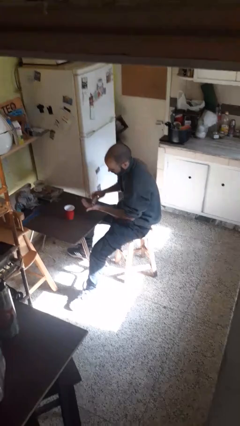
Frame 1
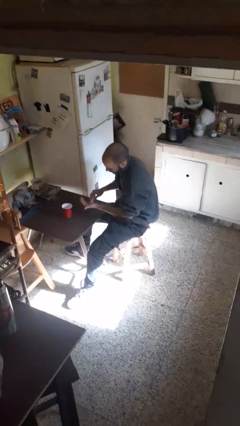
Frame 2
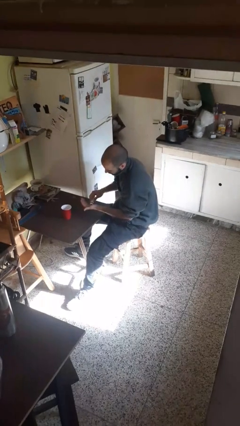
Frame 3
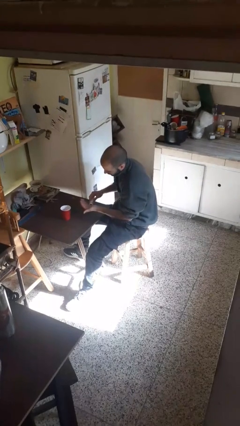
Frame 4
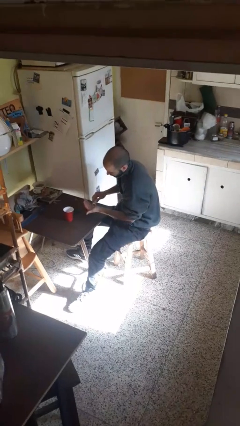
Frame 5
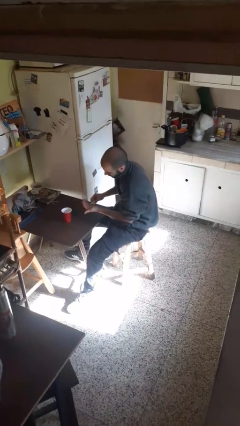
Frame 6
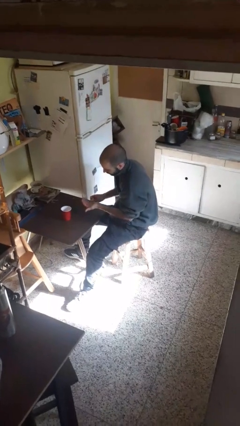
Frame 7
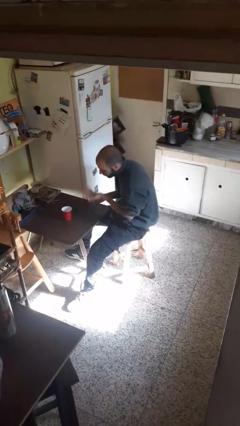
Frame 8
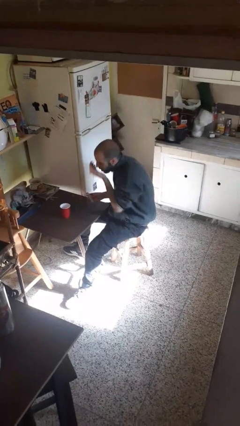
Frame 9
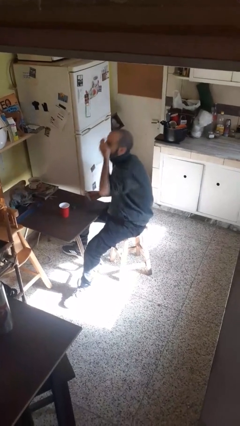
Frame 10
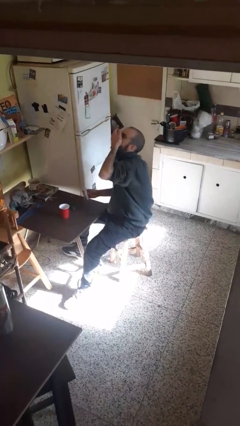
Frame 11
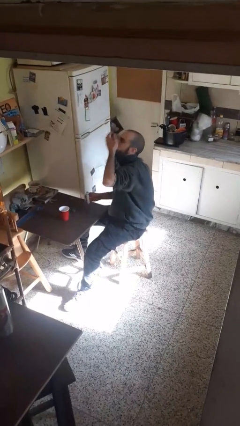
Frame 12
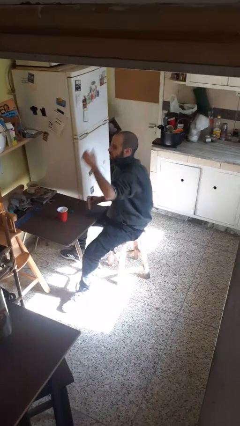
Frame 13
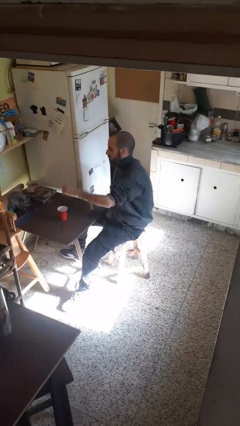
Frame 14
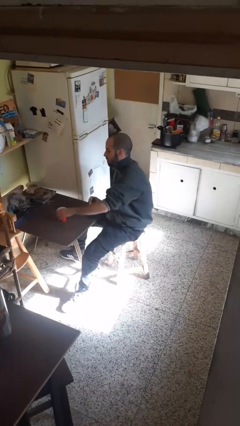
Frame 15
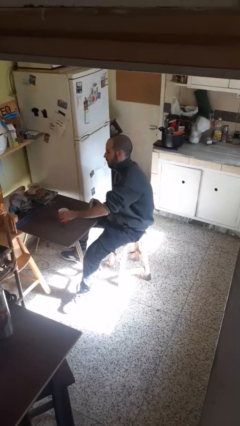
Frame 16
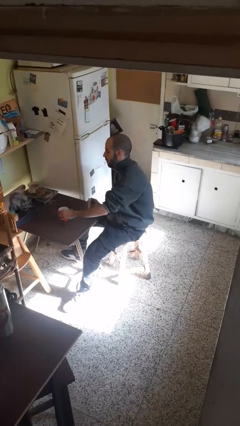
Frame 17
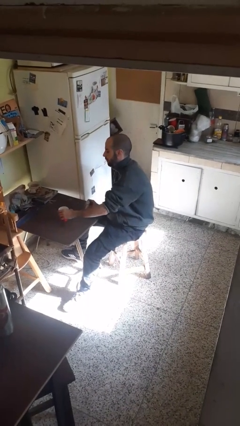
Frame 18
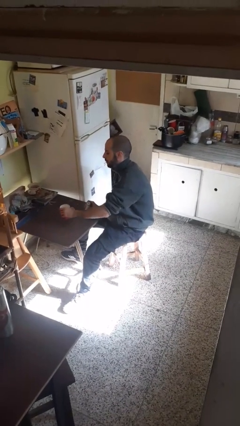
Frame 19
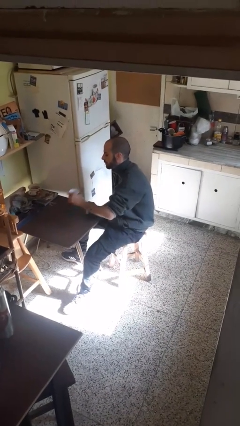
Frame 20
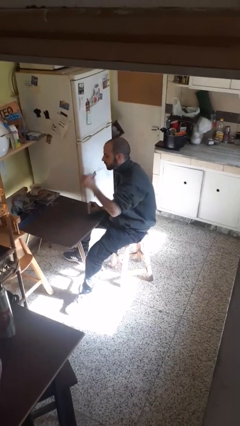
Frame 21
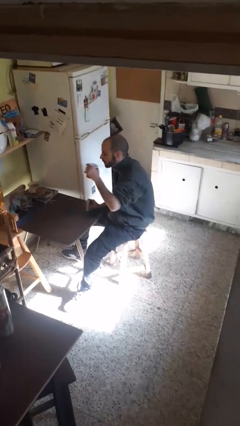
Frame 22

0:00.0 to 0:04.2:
person takes medicine pills

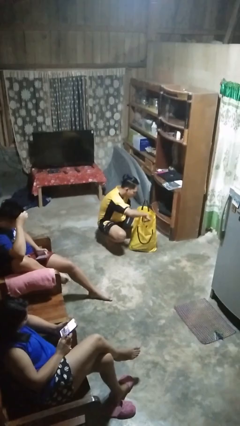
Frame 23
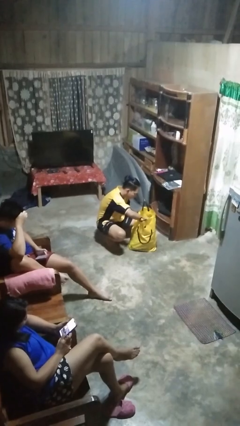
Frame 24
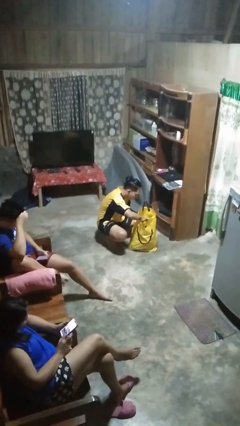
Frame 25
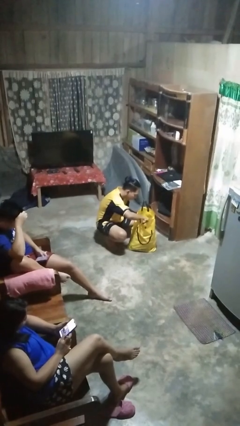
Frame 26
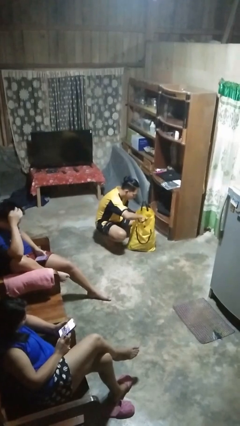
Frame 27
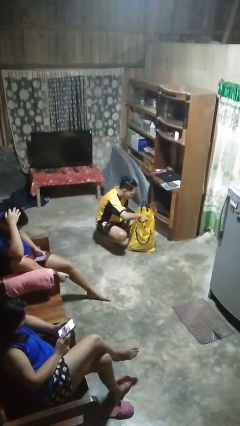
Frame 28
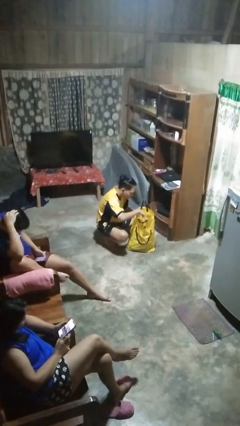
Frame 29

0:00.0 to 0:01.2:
person searches in bag

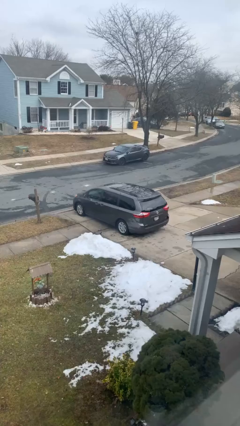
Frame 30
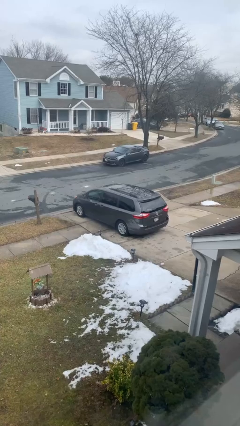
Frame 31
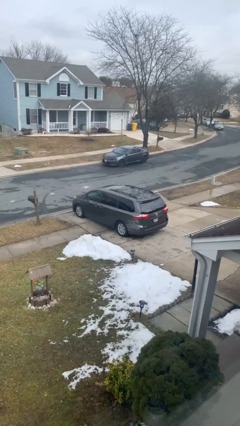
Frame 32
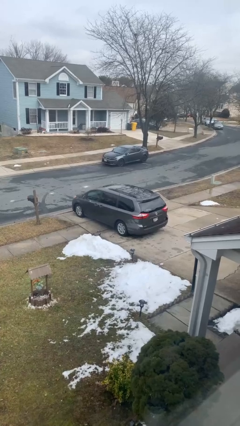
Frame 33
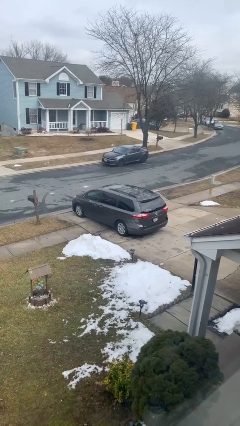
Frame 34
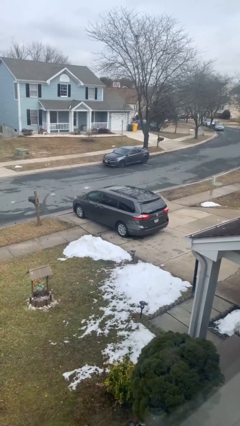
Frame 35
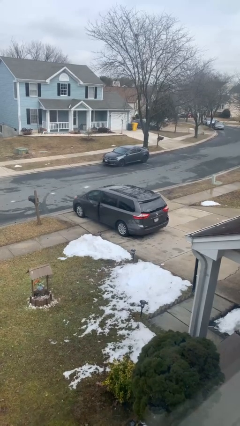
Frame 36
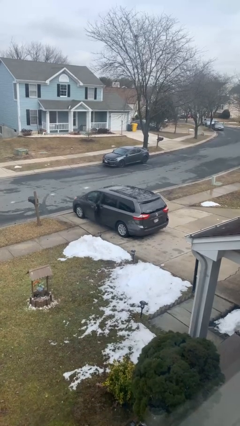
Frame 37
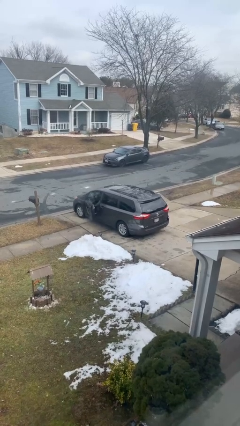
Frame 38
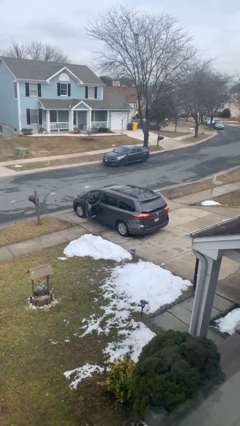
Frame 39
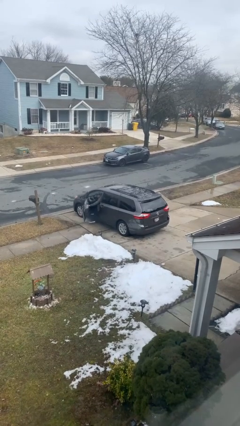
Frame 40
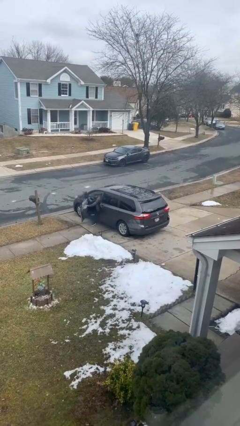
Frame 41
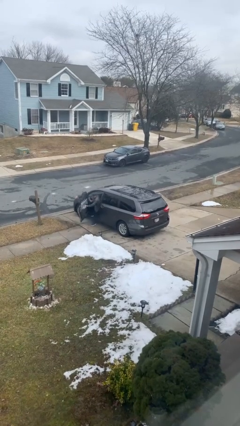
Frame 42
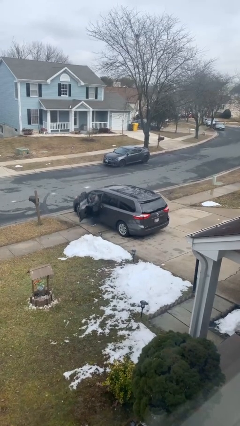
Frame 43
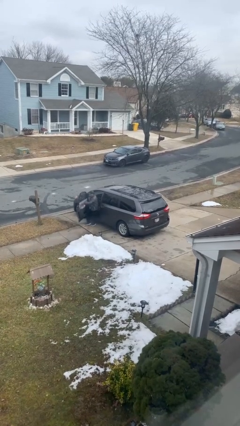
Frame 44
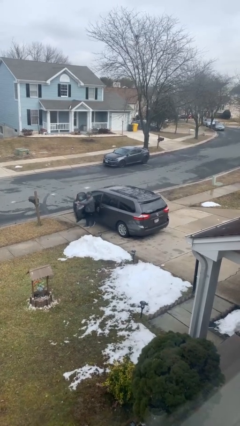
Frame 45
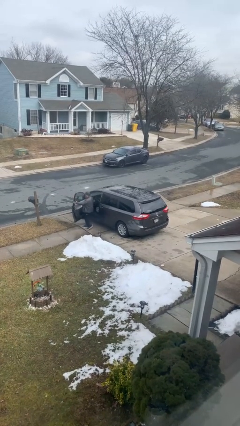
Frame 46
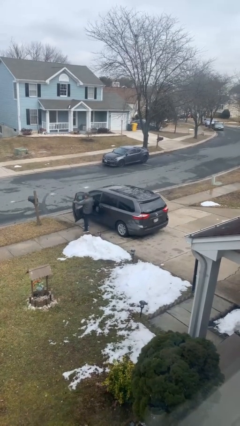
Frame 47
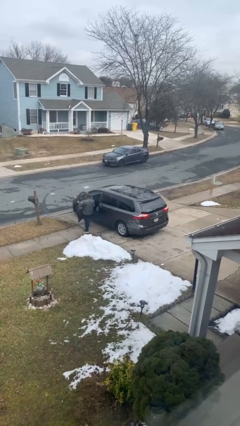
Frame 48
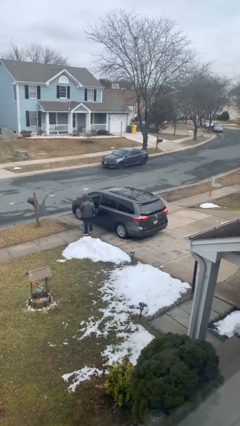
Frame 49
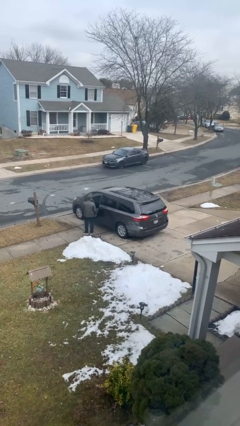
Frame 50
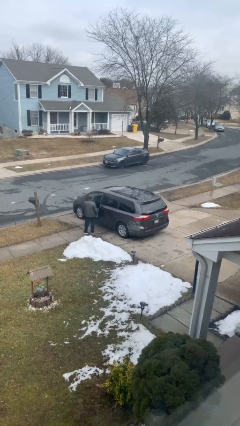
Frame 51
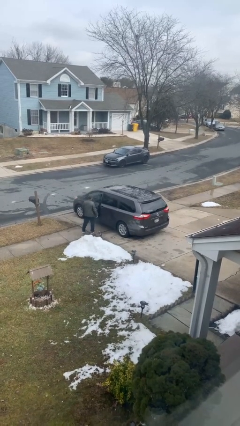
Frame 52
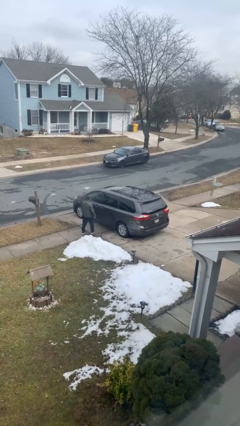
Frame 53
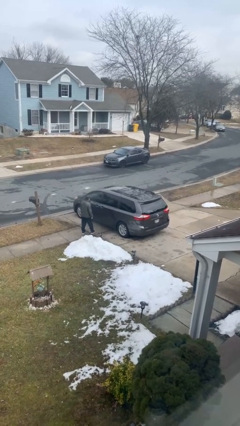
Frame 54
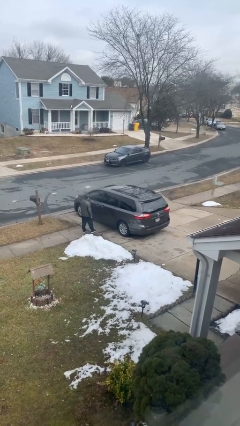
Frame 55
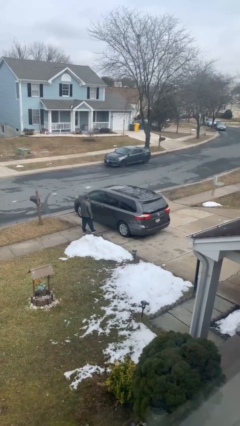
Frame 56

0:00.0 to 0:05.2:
car drops off person

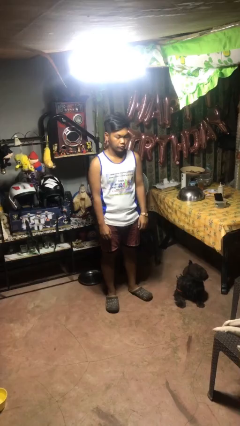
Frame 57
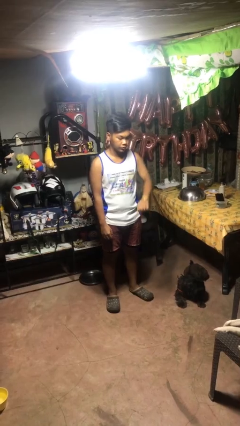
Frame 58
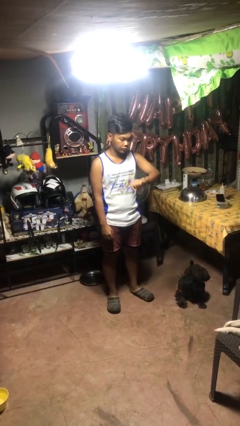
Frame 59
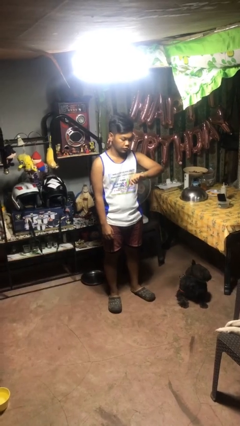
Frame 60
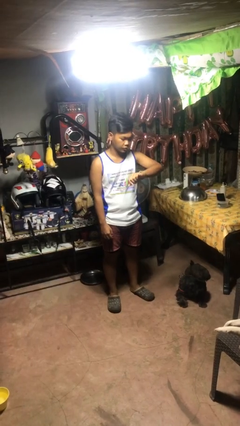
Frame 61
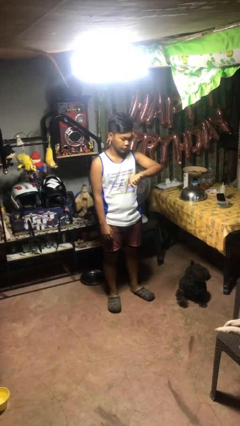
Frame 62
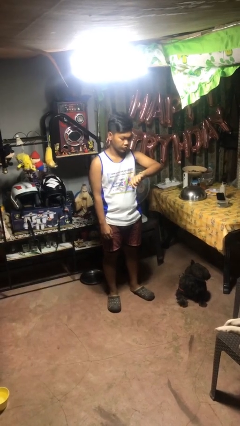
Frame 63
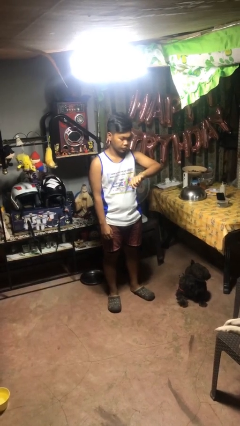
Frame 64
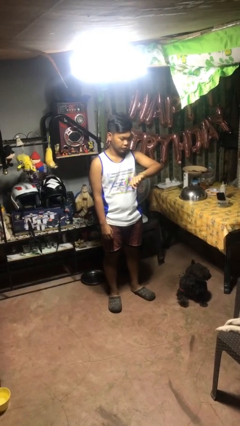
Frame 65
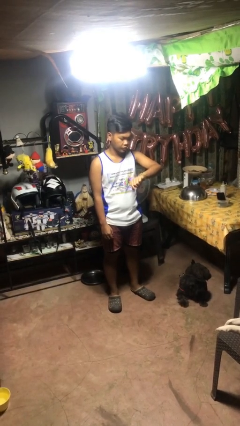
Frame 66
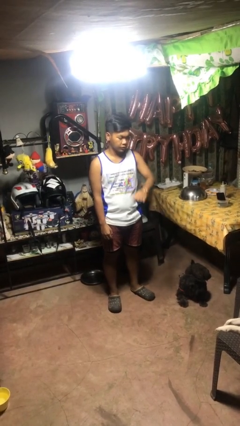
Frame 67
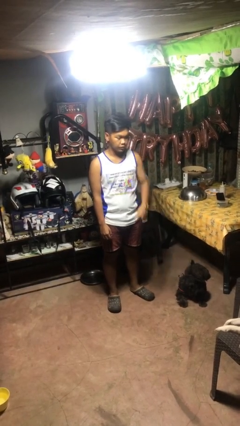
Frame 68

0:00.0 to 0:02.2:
person looks at wristwatch

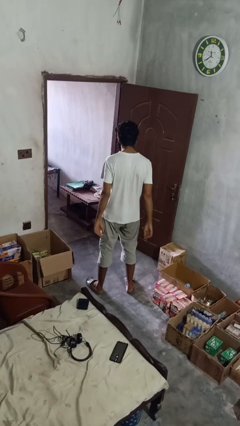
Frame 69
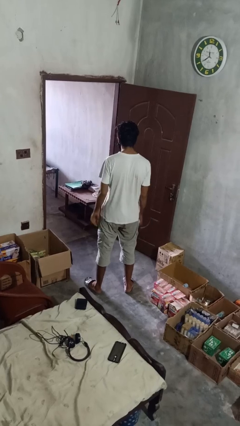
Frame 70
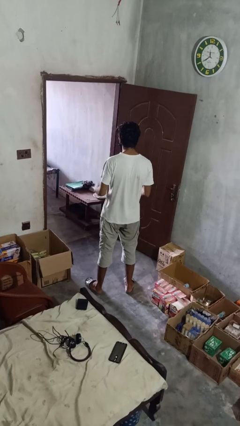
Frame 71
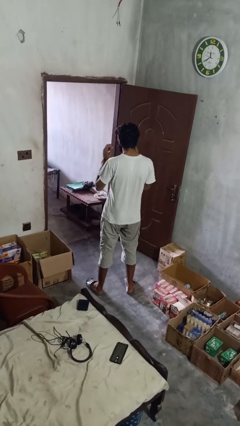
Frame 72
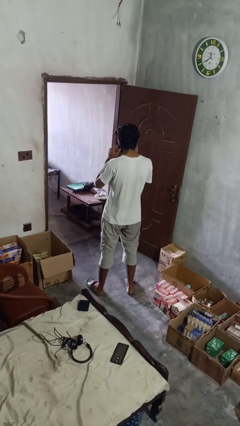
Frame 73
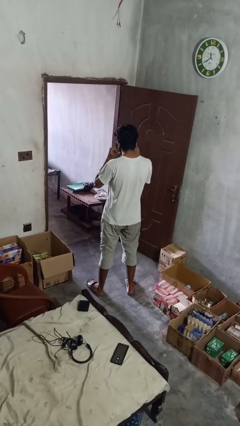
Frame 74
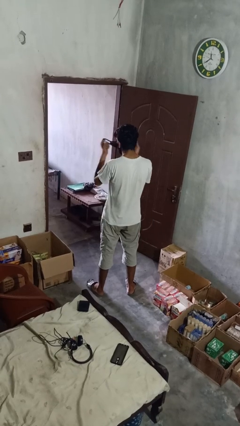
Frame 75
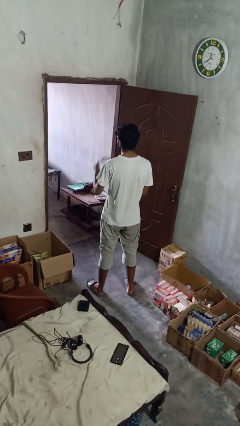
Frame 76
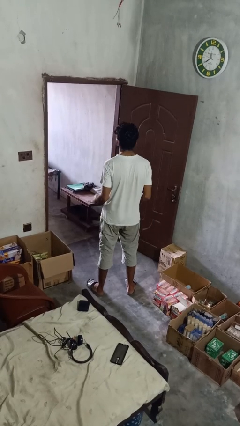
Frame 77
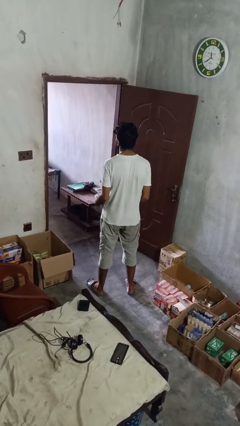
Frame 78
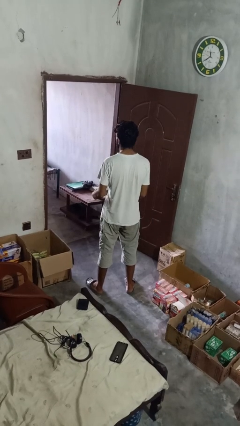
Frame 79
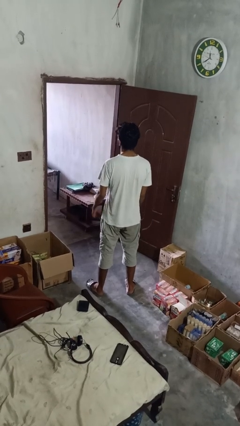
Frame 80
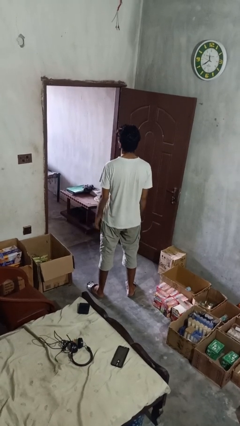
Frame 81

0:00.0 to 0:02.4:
person takes off facemask

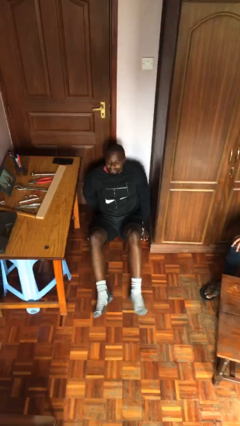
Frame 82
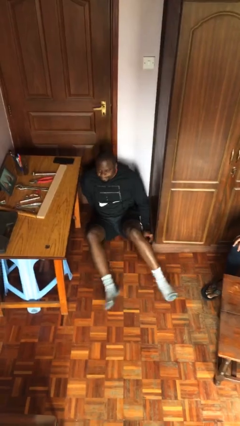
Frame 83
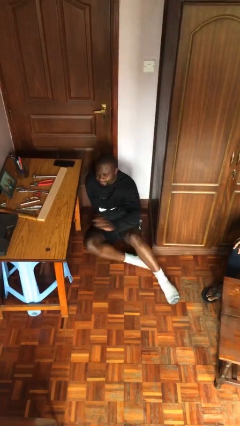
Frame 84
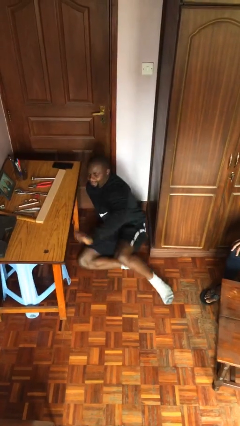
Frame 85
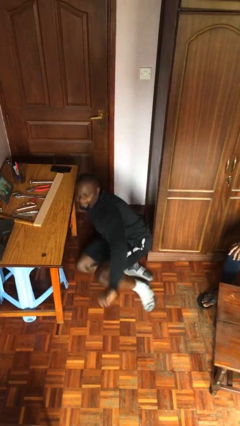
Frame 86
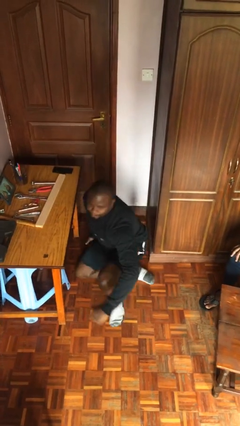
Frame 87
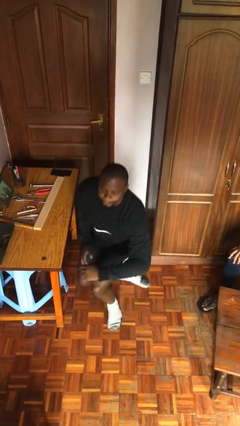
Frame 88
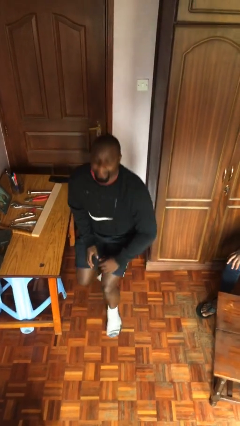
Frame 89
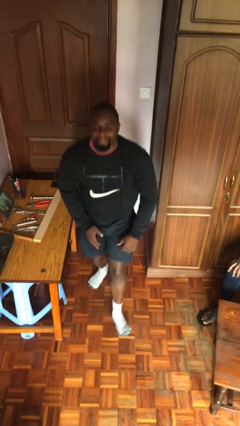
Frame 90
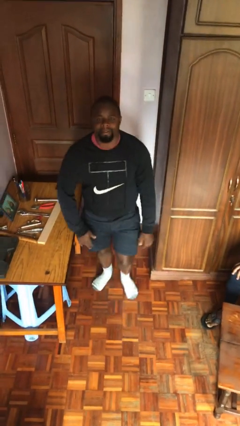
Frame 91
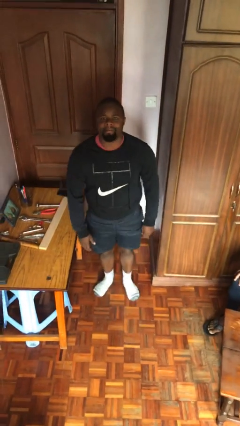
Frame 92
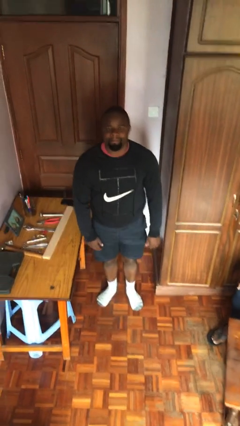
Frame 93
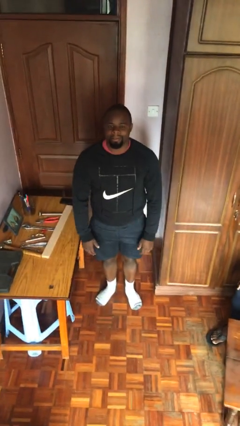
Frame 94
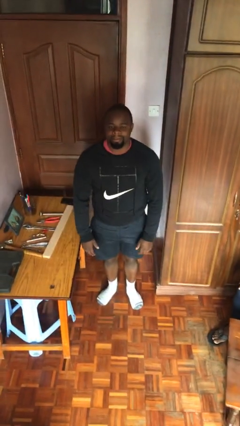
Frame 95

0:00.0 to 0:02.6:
person stands up
